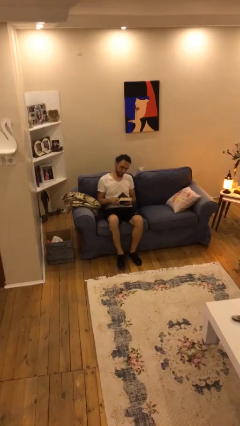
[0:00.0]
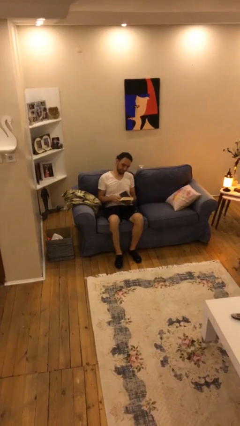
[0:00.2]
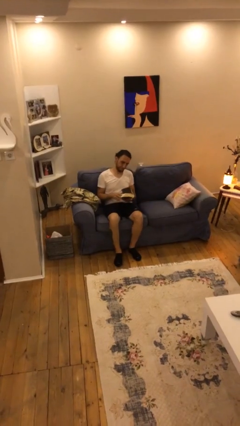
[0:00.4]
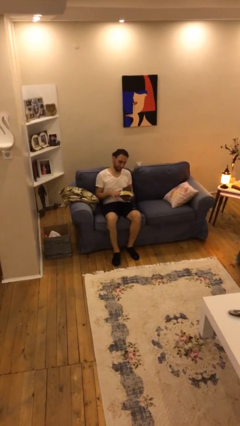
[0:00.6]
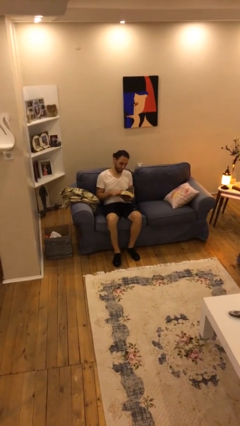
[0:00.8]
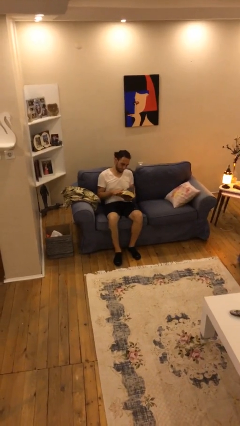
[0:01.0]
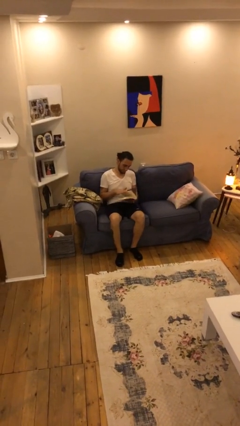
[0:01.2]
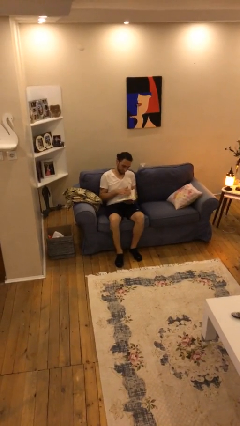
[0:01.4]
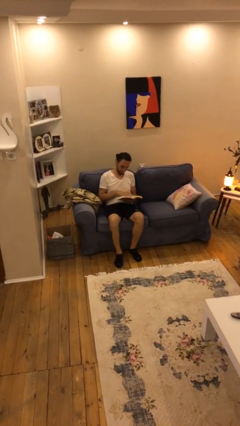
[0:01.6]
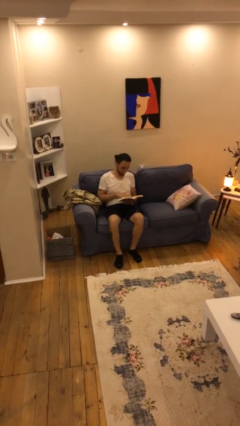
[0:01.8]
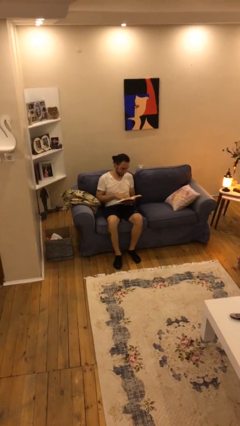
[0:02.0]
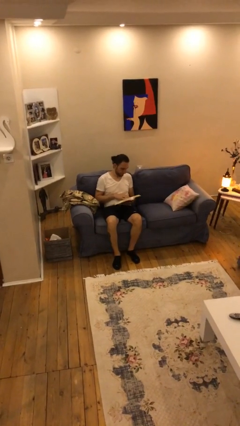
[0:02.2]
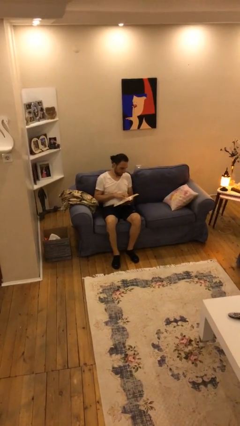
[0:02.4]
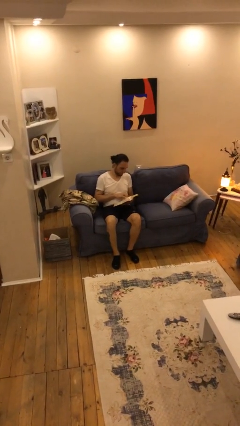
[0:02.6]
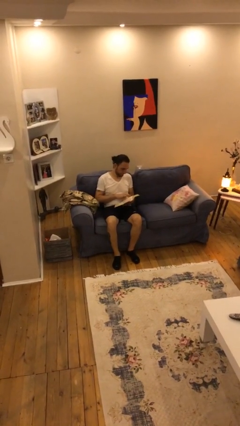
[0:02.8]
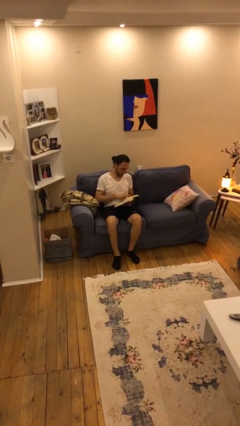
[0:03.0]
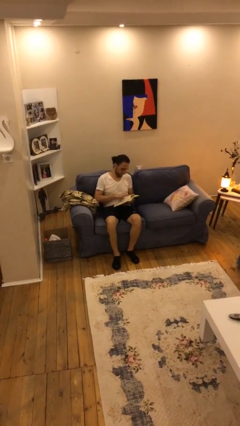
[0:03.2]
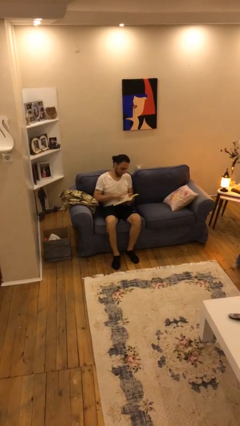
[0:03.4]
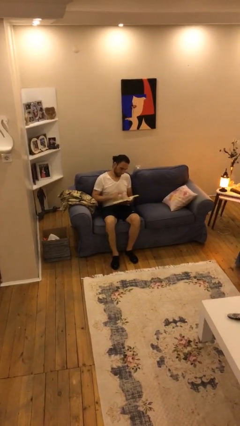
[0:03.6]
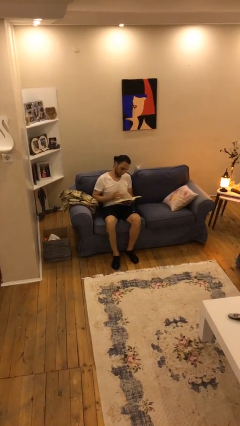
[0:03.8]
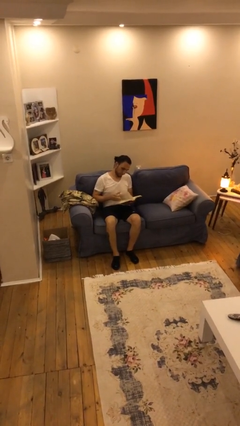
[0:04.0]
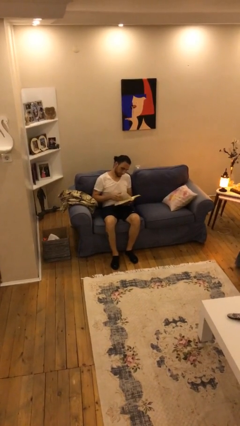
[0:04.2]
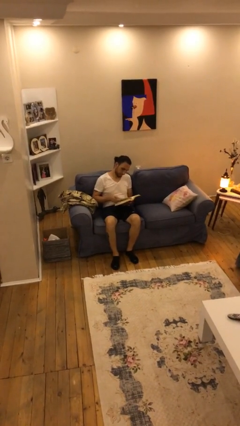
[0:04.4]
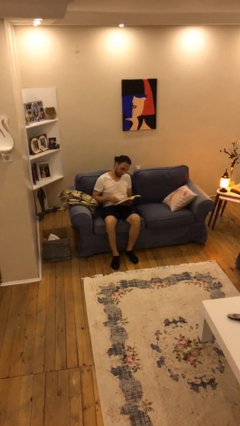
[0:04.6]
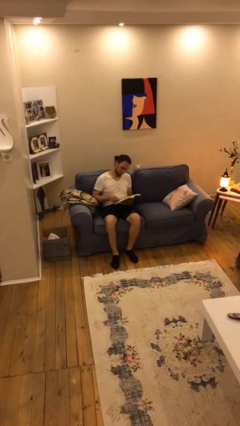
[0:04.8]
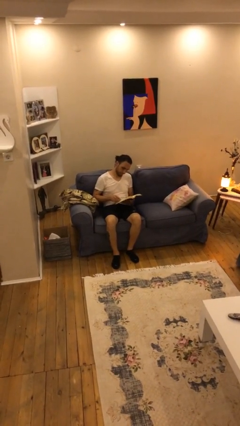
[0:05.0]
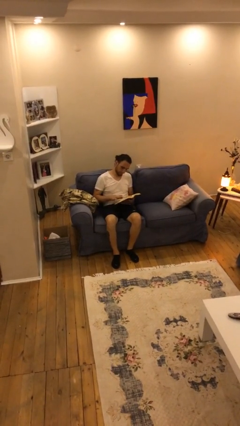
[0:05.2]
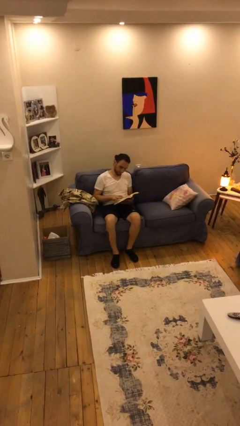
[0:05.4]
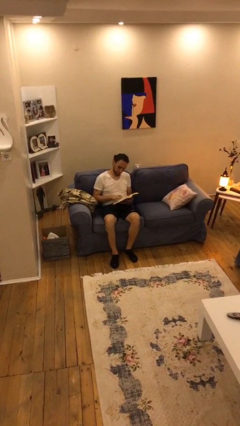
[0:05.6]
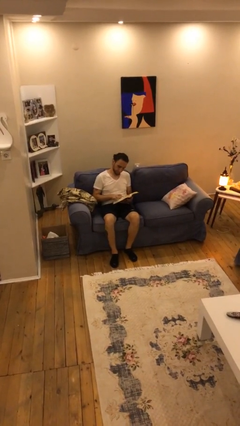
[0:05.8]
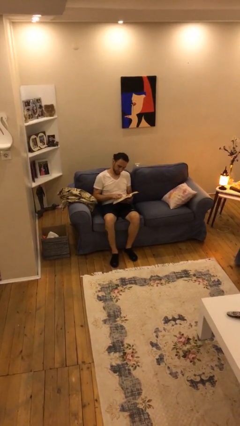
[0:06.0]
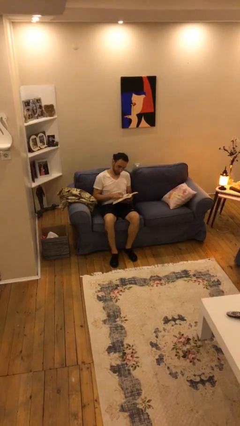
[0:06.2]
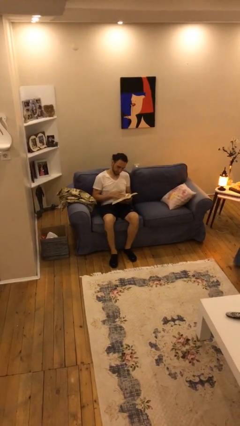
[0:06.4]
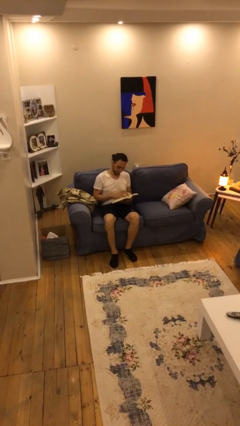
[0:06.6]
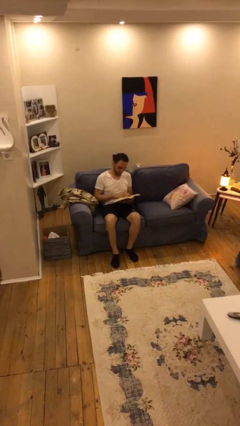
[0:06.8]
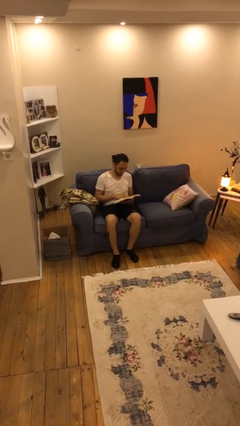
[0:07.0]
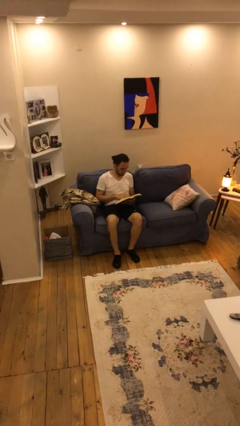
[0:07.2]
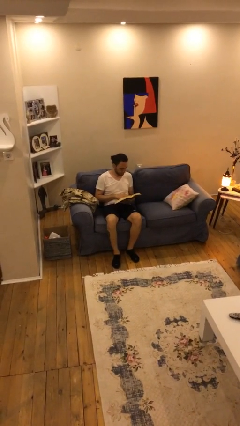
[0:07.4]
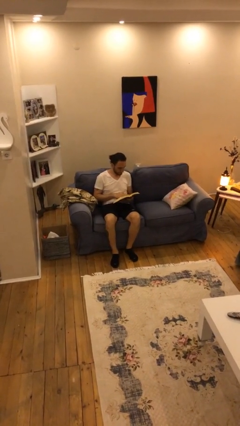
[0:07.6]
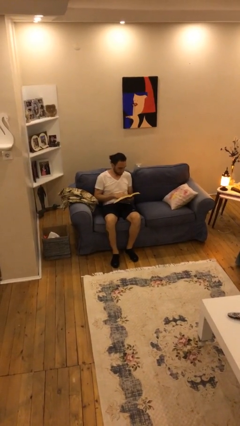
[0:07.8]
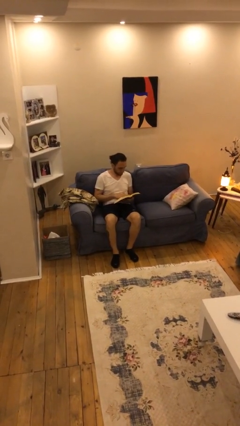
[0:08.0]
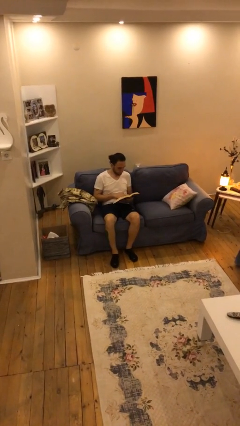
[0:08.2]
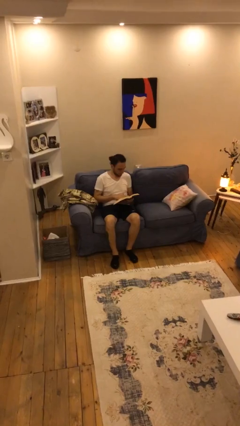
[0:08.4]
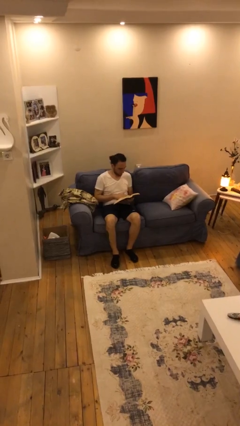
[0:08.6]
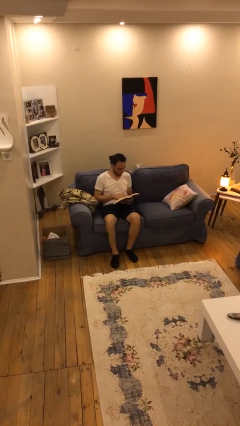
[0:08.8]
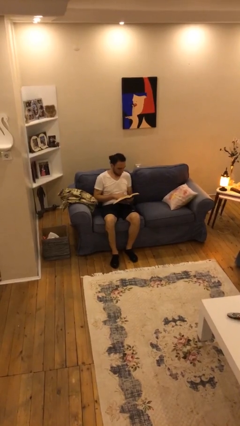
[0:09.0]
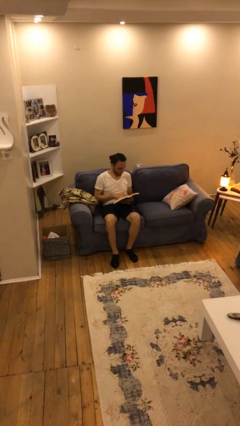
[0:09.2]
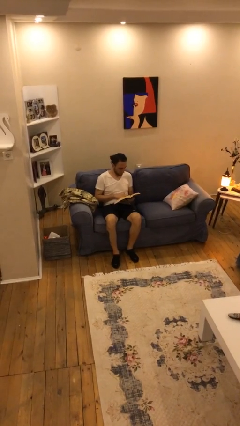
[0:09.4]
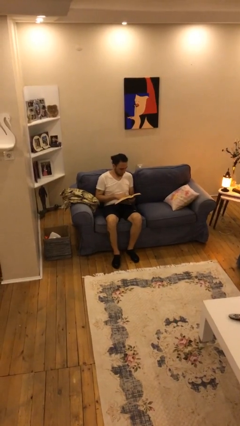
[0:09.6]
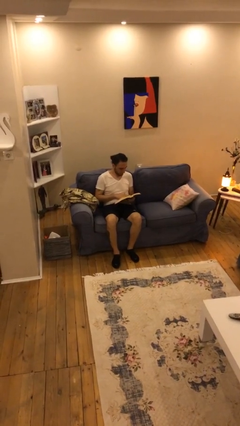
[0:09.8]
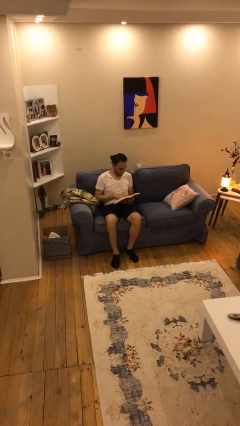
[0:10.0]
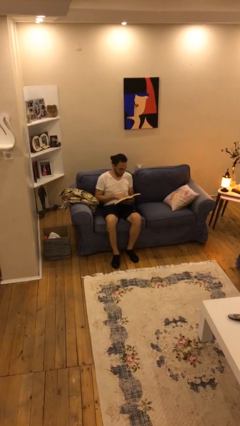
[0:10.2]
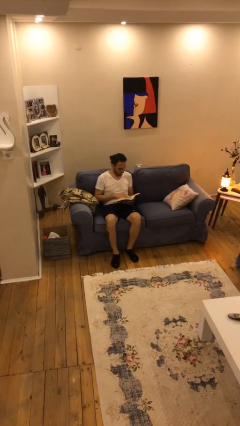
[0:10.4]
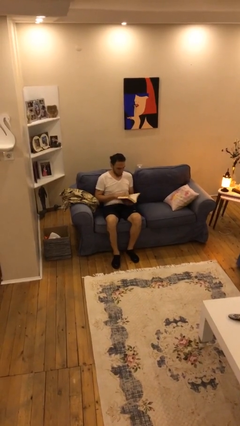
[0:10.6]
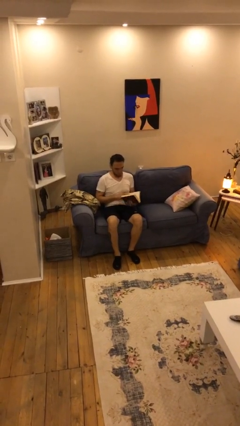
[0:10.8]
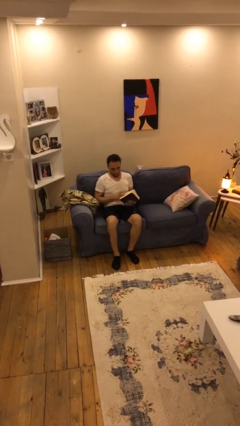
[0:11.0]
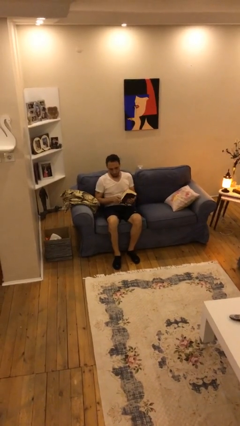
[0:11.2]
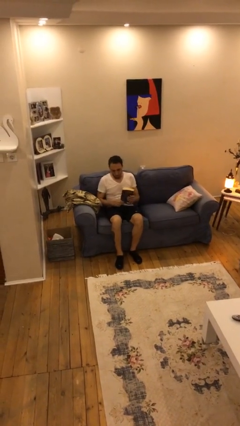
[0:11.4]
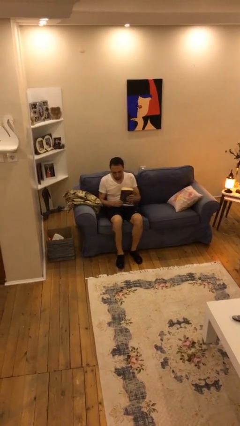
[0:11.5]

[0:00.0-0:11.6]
person reads document

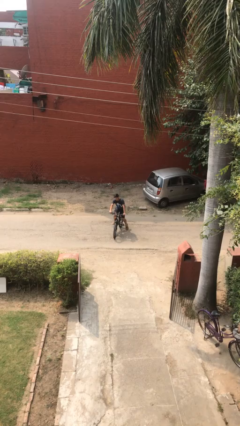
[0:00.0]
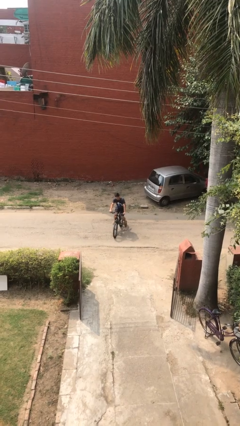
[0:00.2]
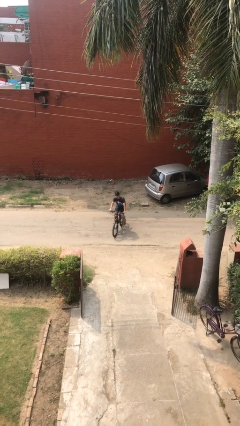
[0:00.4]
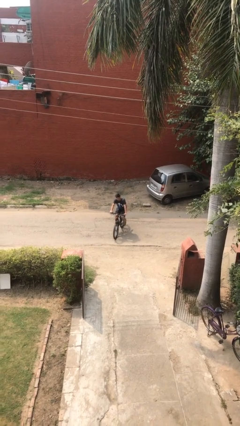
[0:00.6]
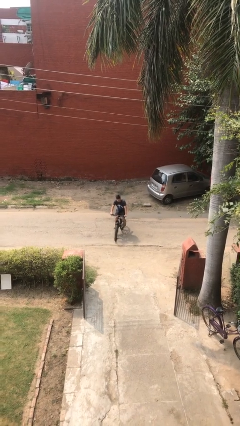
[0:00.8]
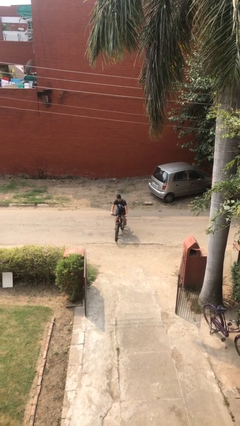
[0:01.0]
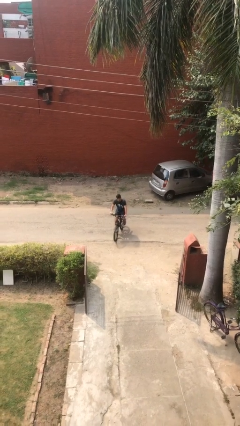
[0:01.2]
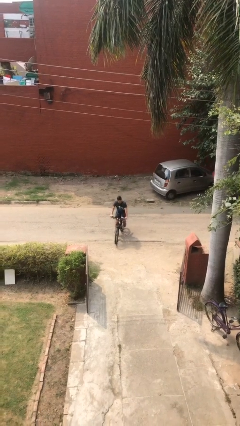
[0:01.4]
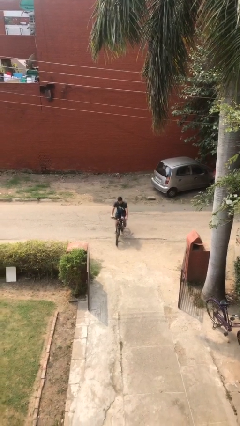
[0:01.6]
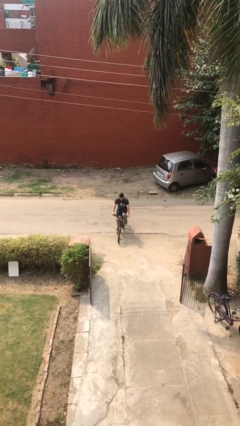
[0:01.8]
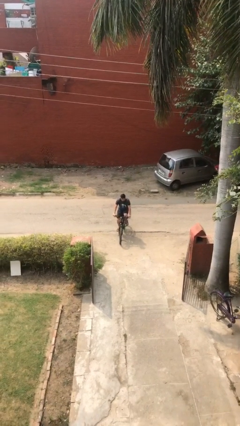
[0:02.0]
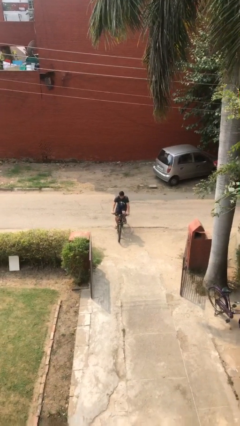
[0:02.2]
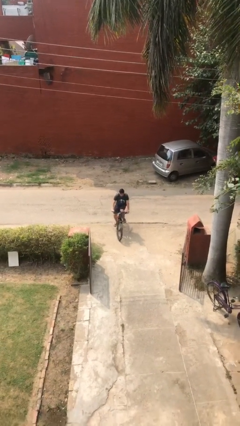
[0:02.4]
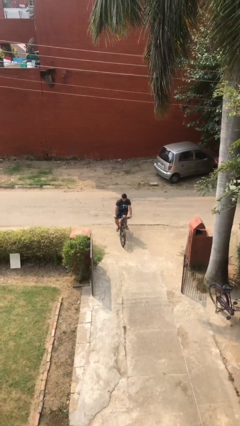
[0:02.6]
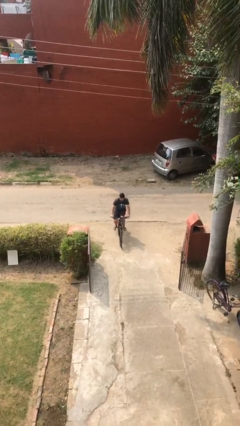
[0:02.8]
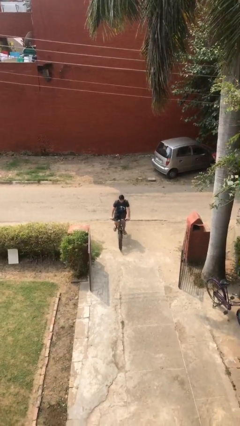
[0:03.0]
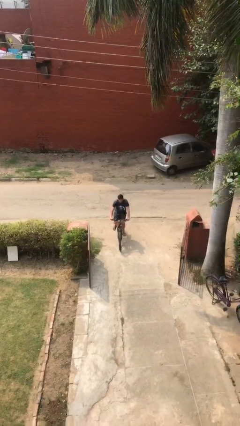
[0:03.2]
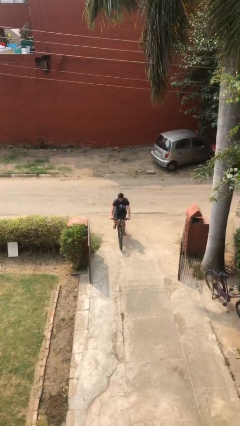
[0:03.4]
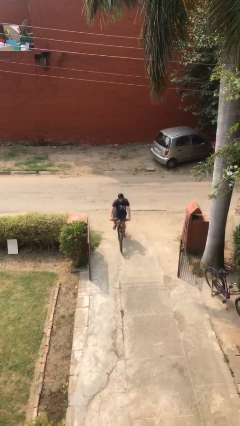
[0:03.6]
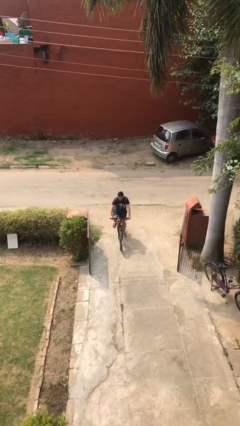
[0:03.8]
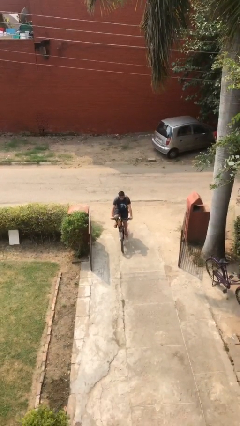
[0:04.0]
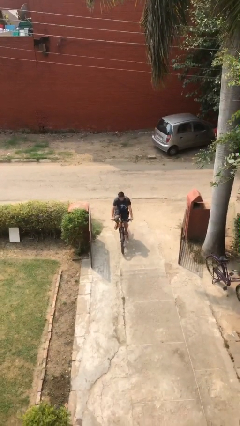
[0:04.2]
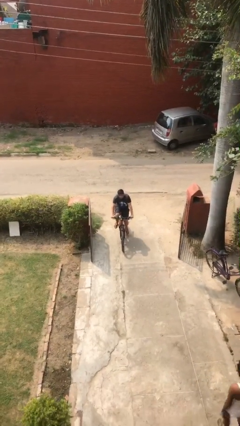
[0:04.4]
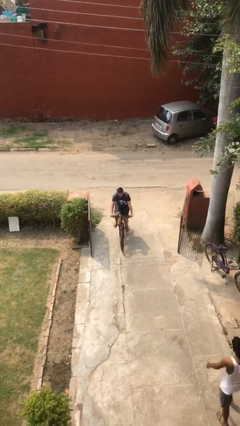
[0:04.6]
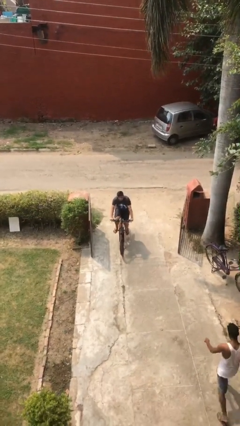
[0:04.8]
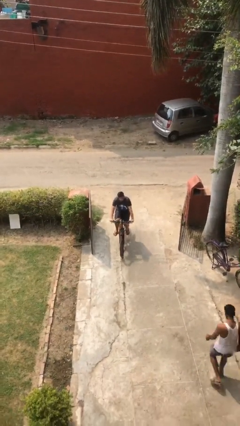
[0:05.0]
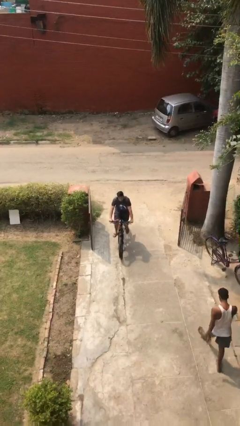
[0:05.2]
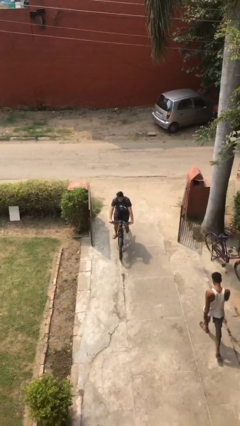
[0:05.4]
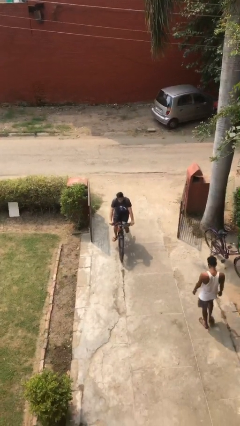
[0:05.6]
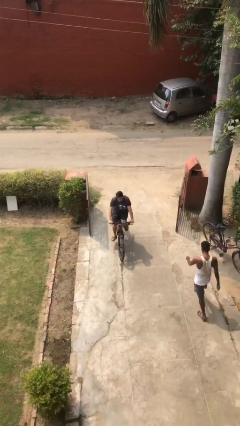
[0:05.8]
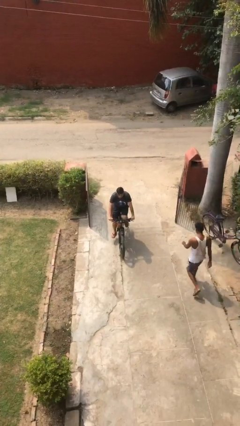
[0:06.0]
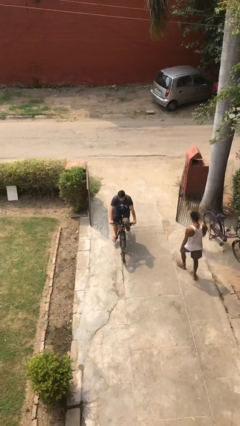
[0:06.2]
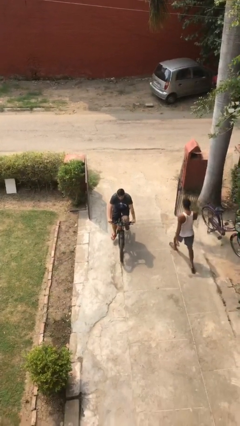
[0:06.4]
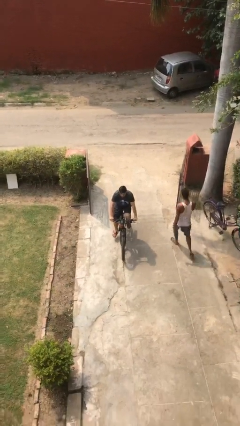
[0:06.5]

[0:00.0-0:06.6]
person rides bicycle

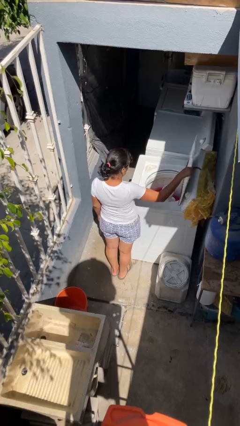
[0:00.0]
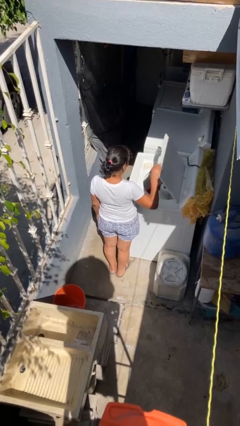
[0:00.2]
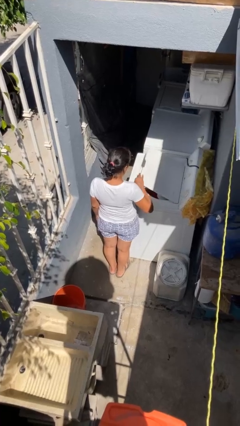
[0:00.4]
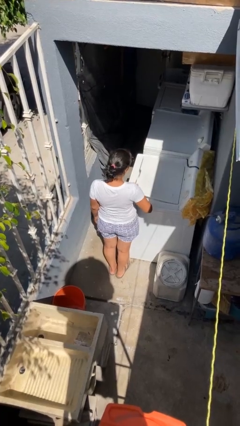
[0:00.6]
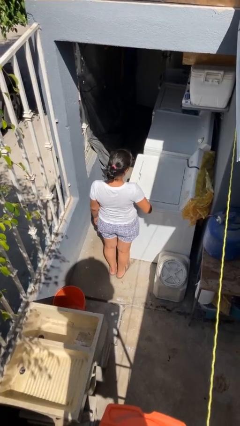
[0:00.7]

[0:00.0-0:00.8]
person closes clothes washer
